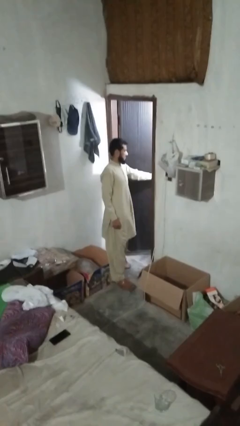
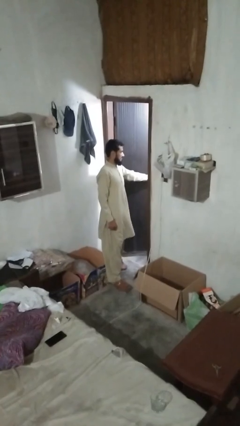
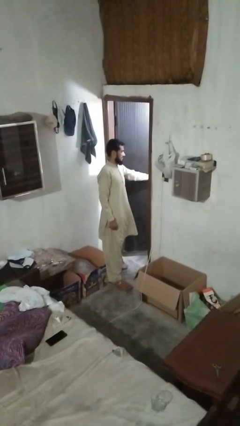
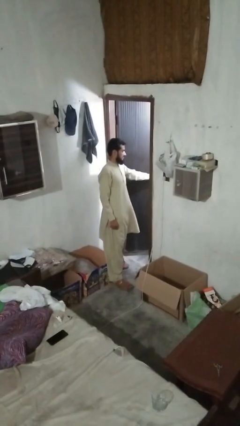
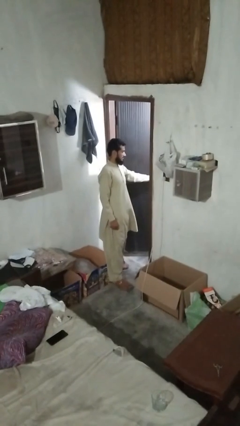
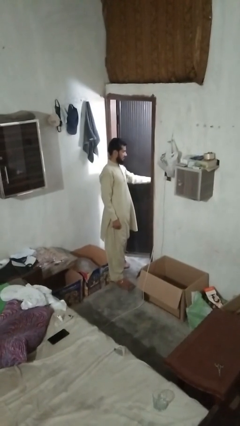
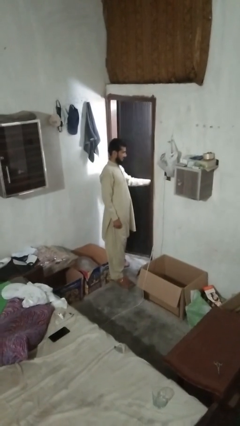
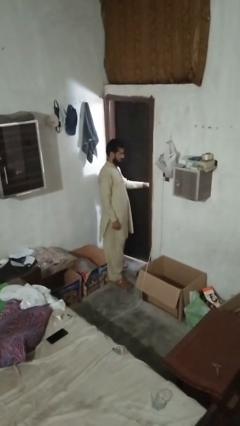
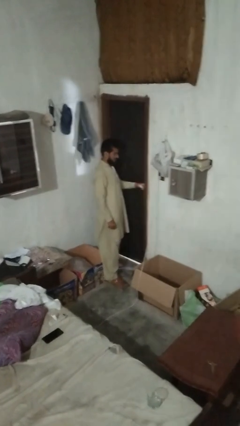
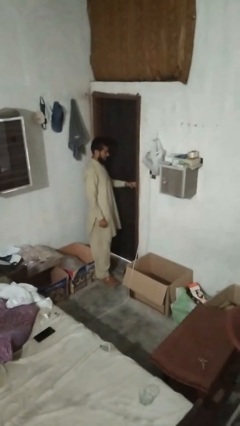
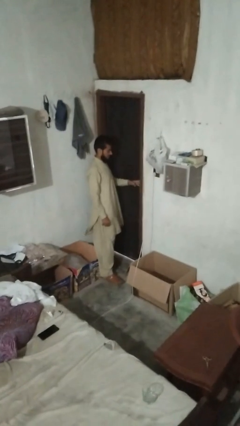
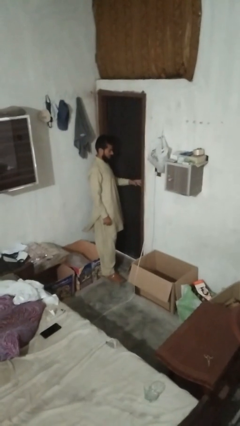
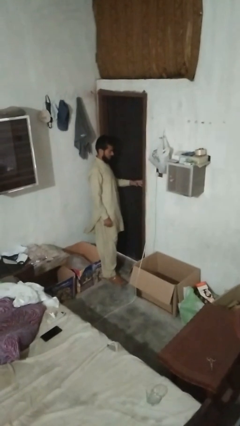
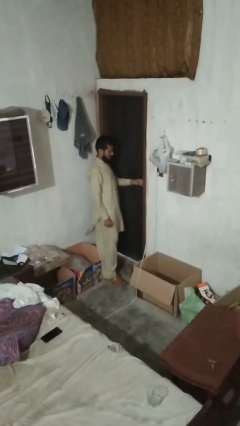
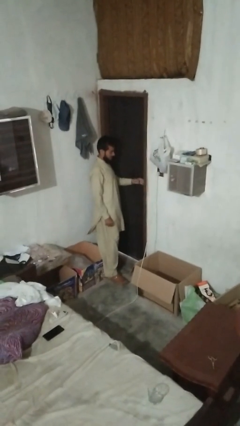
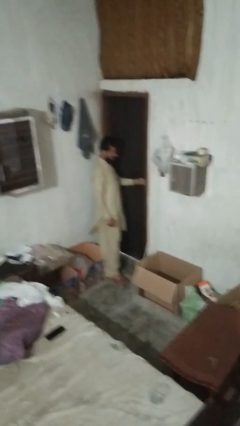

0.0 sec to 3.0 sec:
person closes facility door

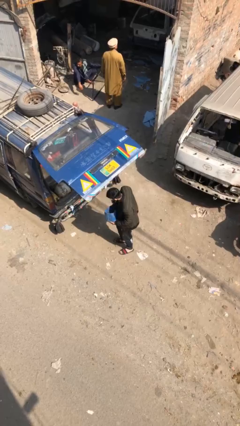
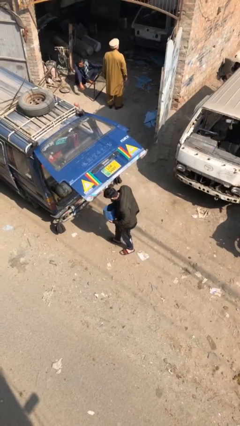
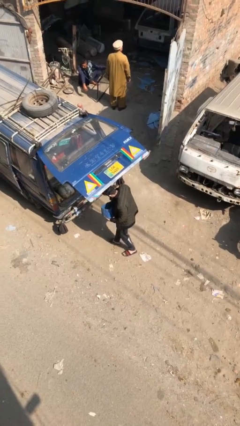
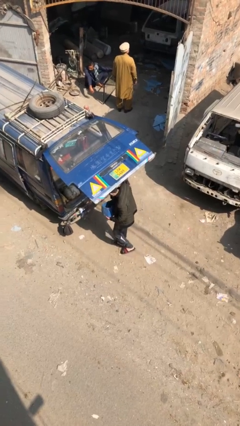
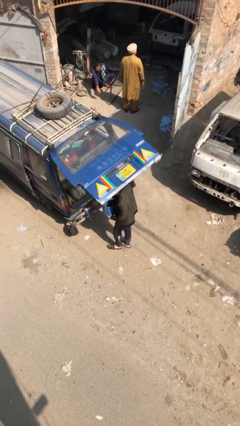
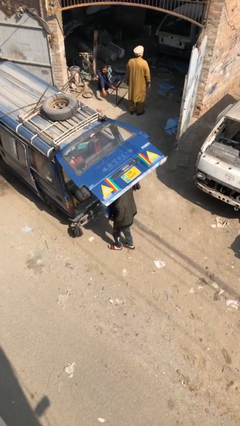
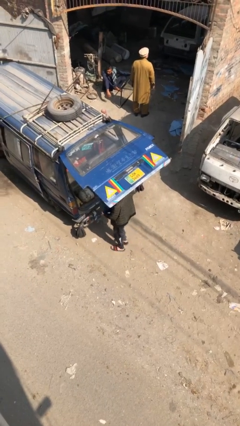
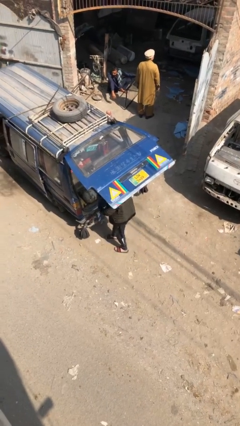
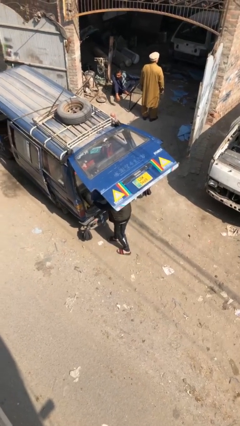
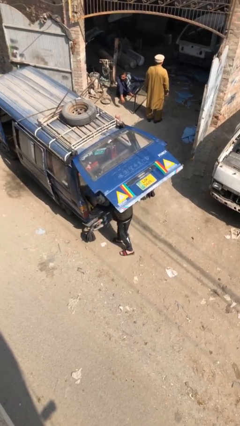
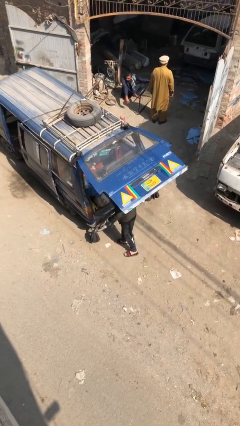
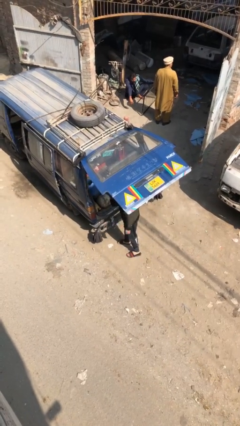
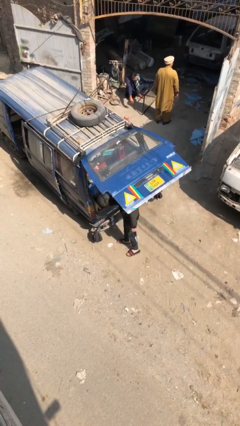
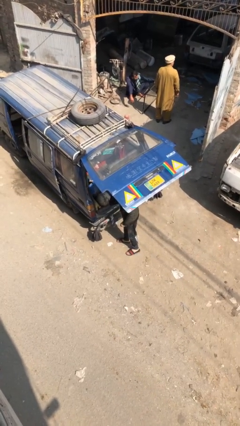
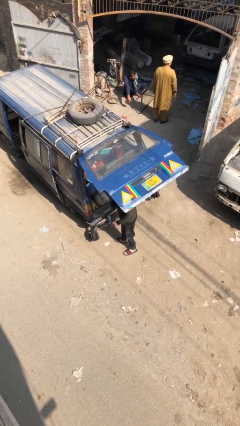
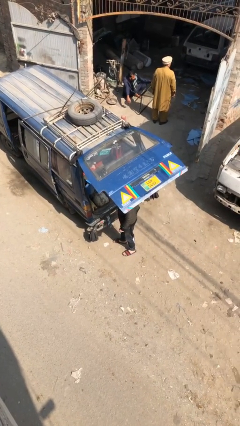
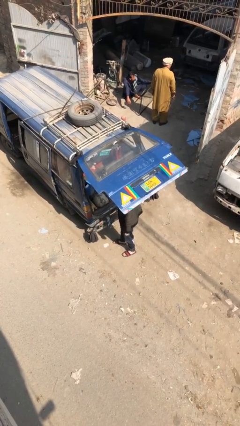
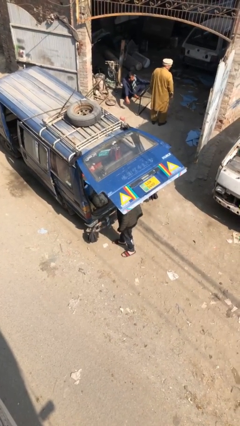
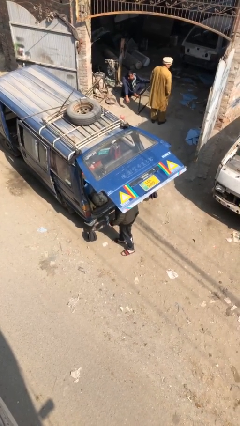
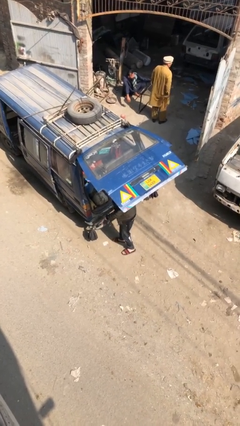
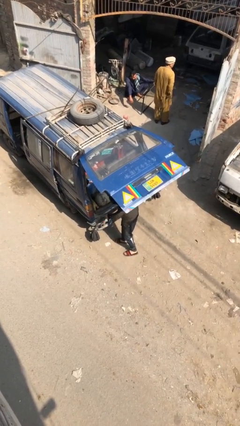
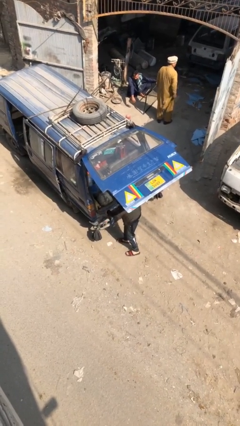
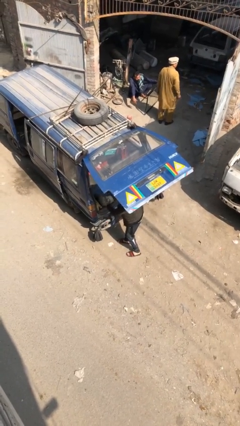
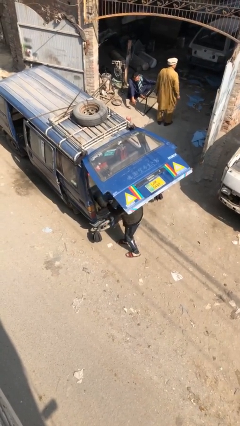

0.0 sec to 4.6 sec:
person loads car

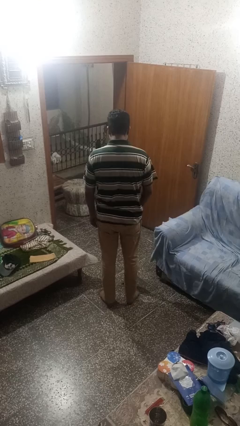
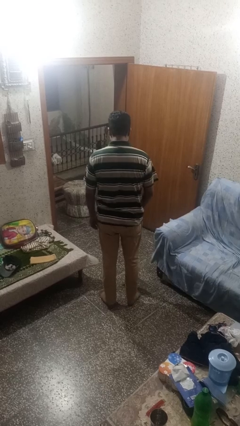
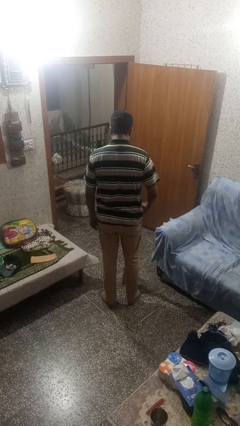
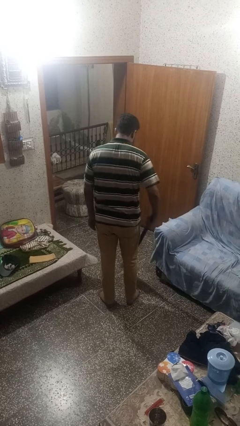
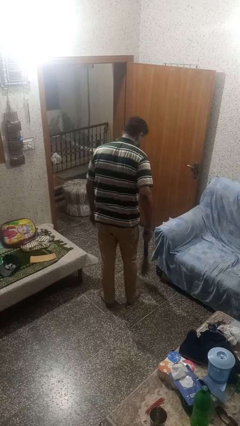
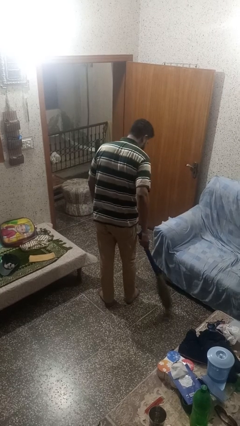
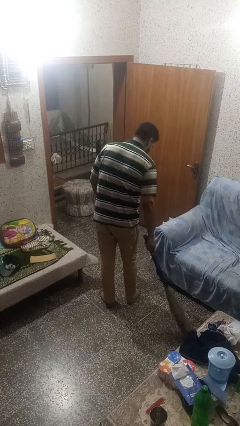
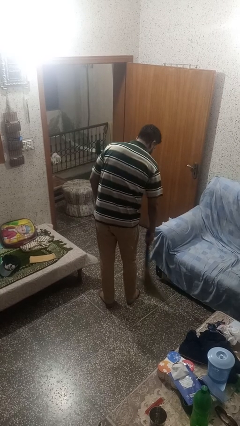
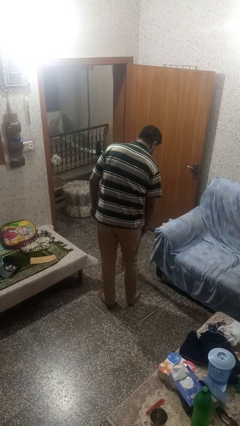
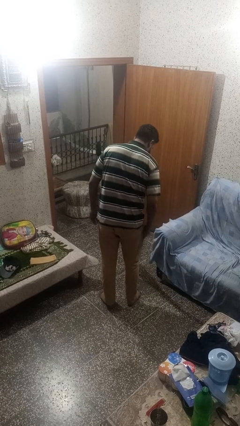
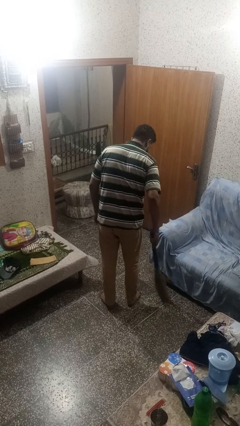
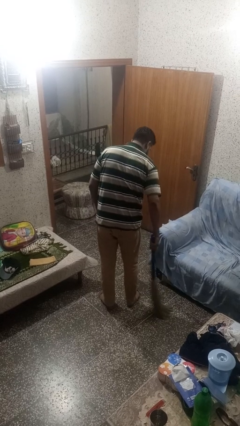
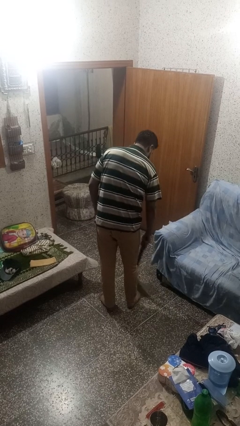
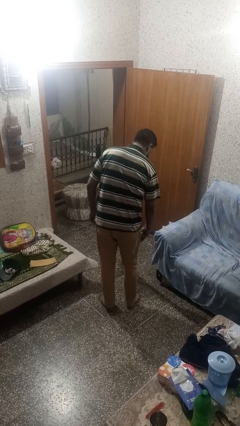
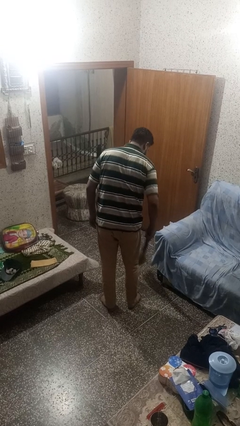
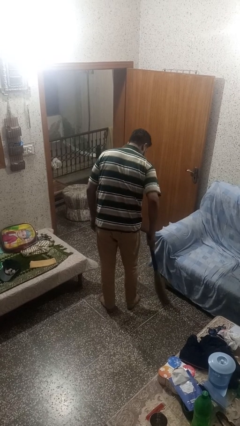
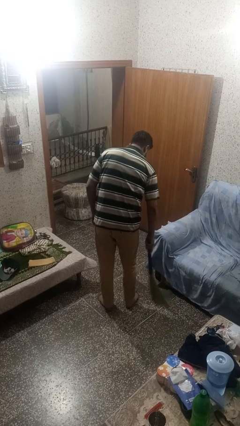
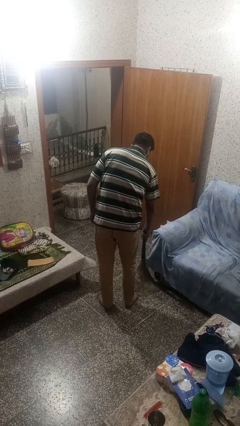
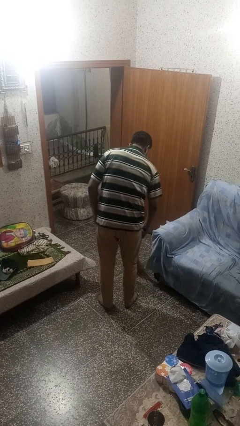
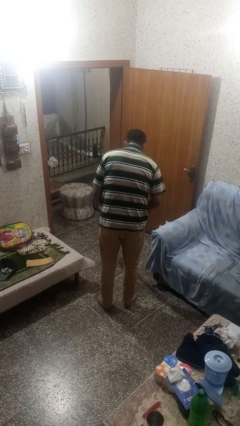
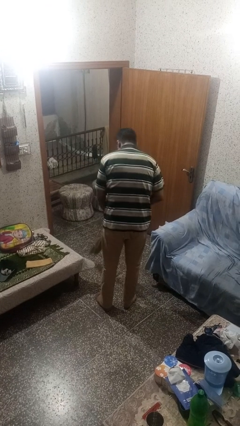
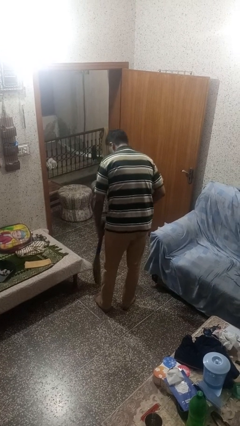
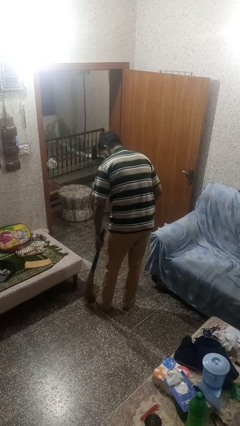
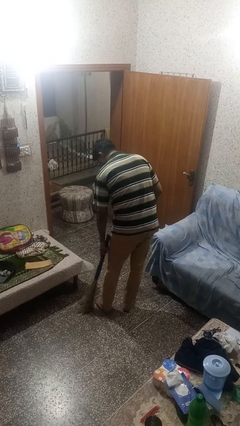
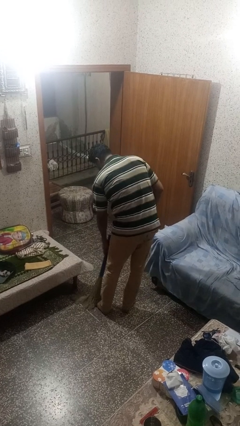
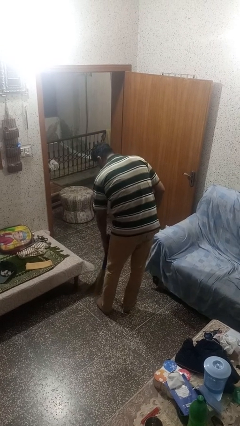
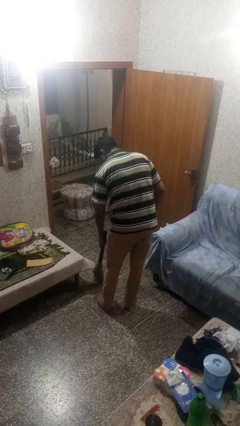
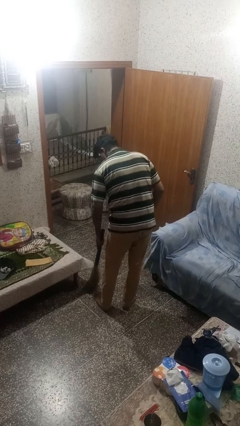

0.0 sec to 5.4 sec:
person sweeps floor

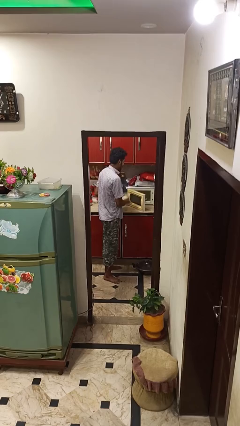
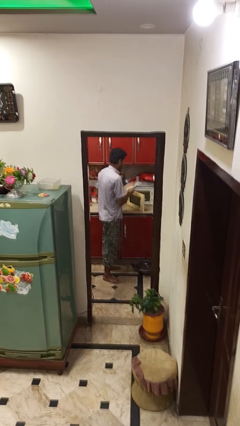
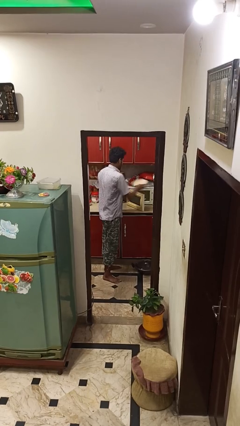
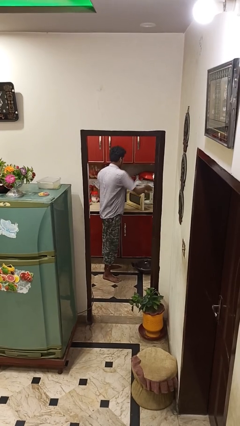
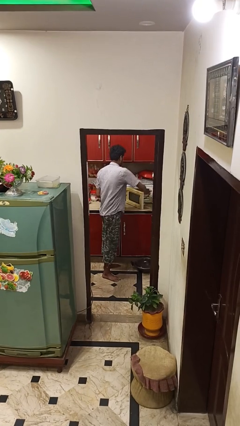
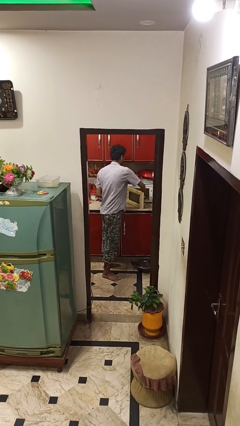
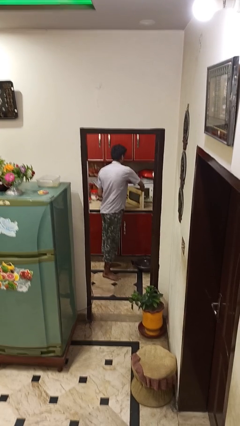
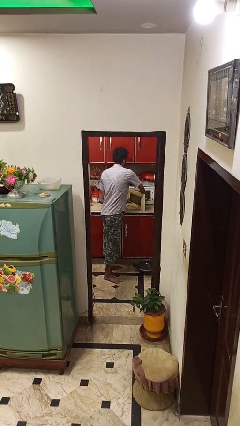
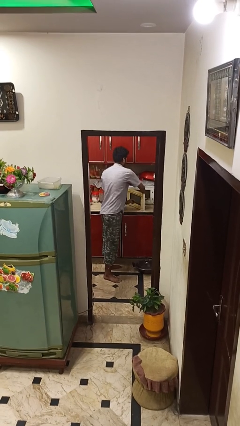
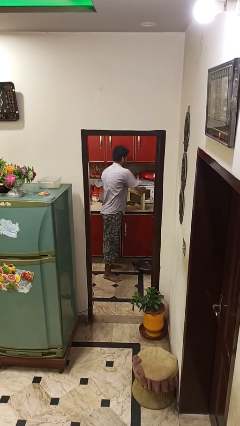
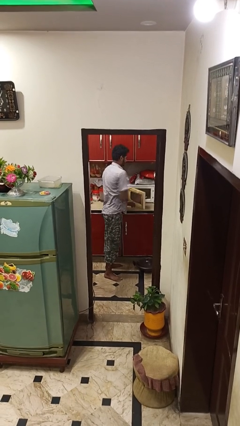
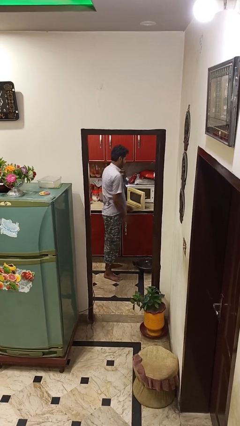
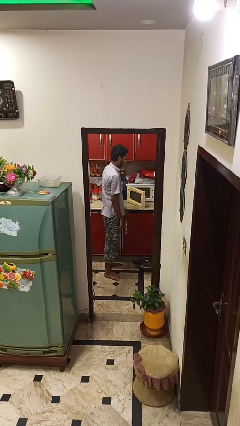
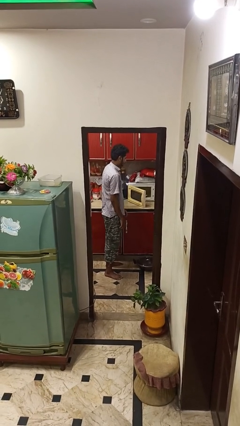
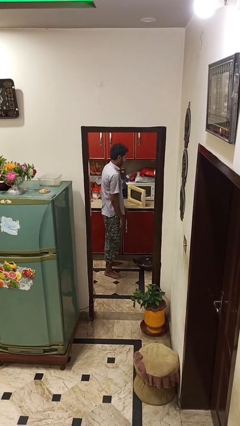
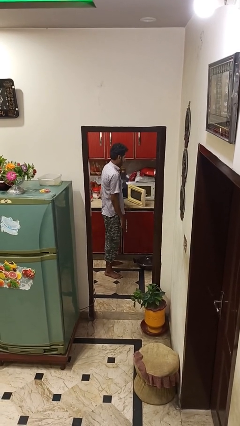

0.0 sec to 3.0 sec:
person puts object into microwave

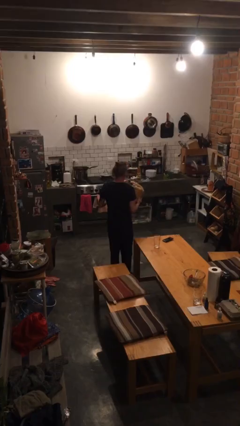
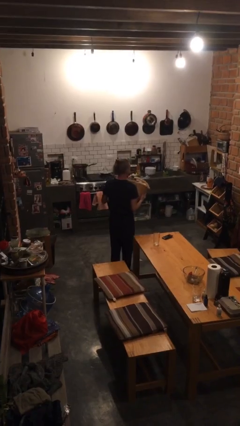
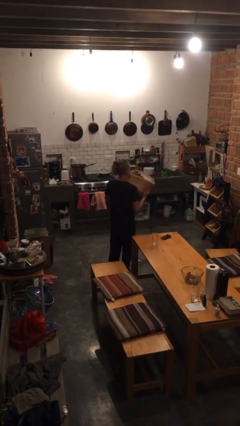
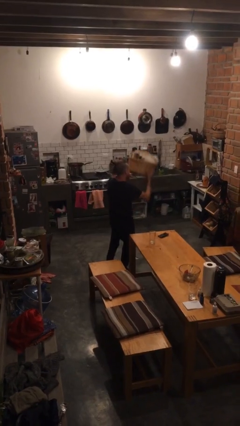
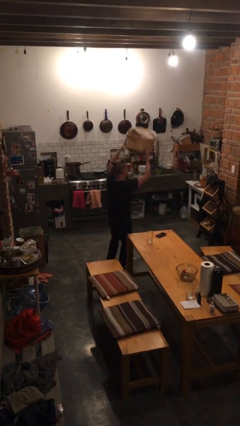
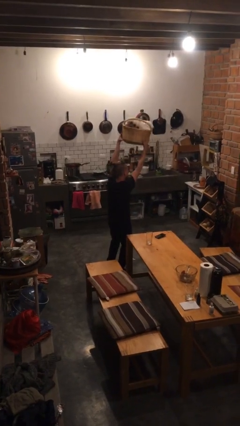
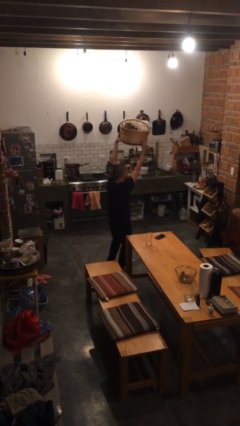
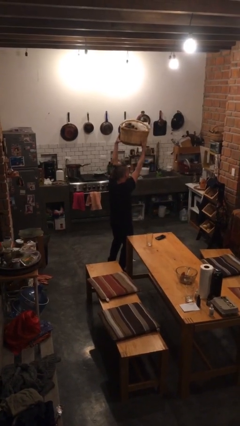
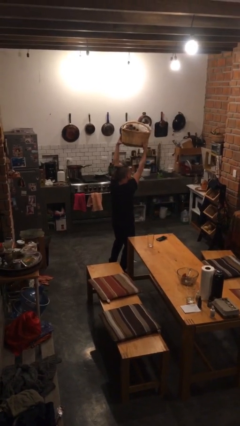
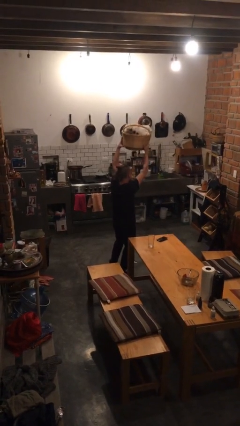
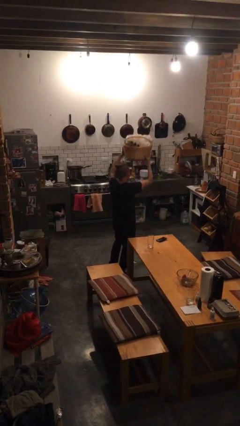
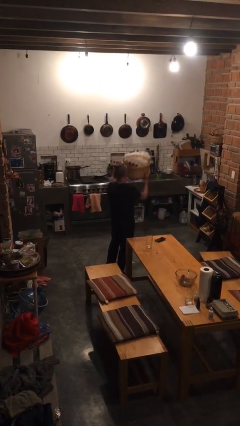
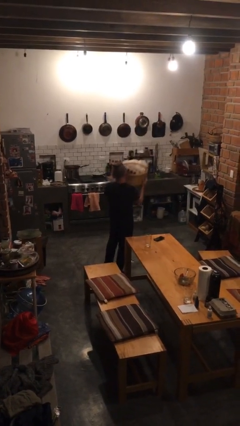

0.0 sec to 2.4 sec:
person holds object above head
